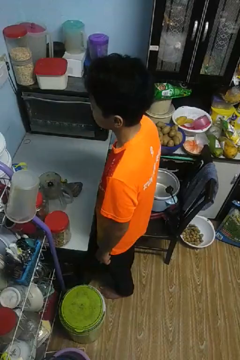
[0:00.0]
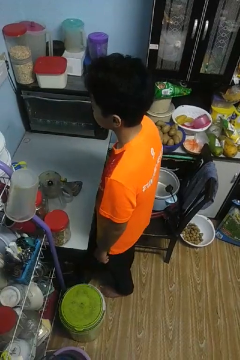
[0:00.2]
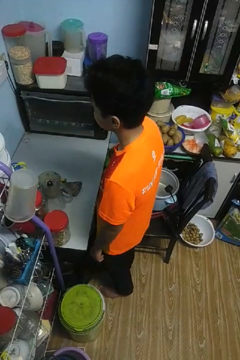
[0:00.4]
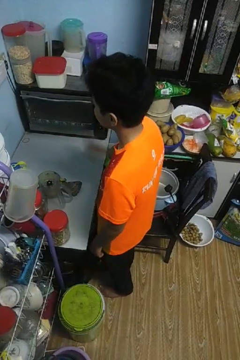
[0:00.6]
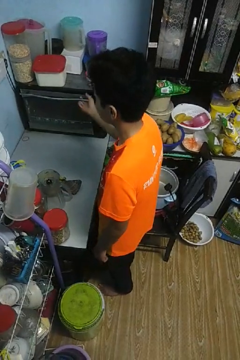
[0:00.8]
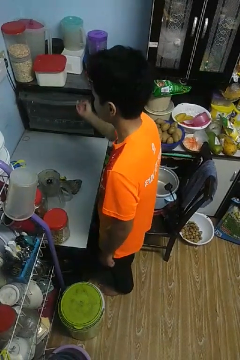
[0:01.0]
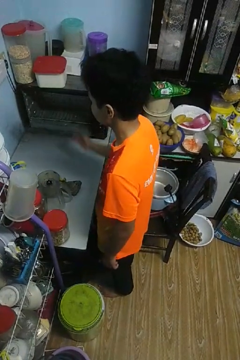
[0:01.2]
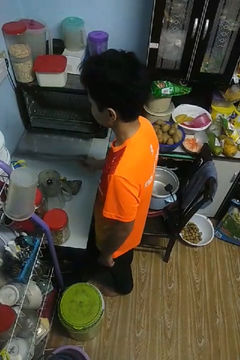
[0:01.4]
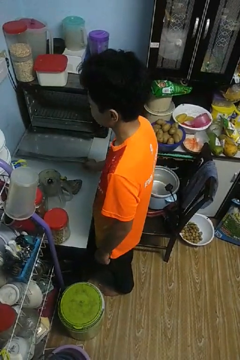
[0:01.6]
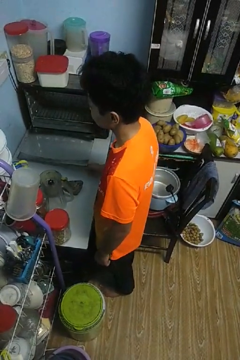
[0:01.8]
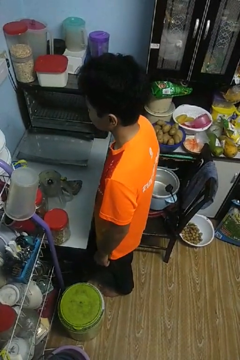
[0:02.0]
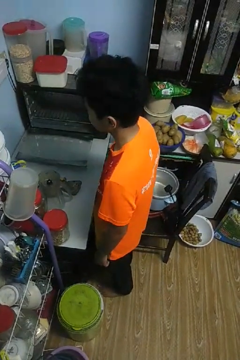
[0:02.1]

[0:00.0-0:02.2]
person opens oven door

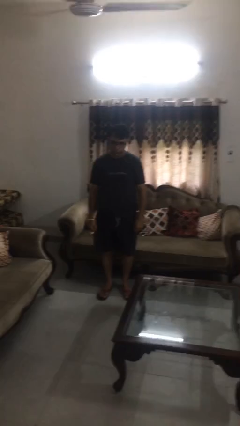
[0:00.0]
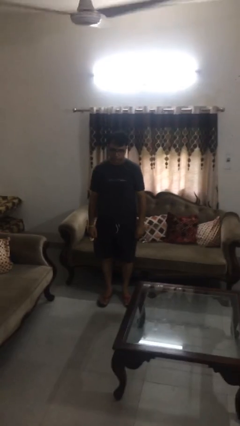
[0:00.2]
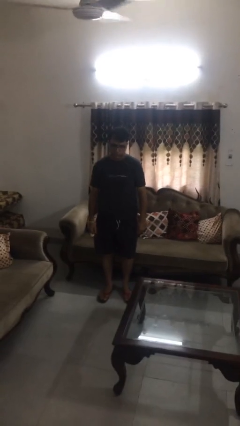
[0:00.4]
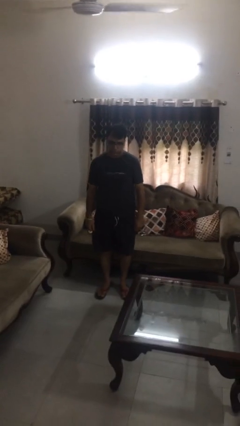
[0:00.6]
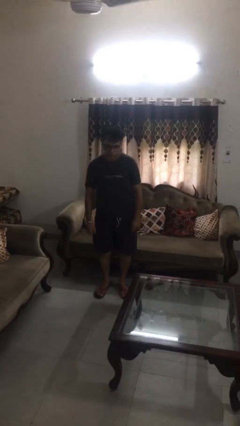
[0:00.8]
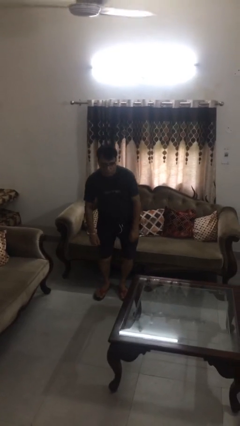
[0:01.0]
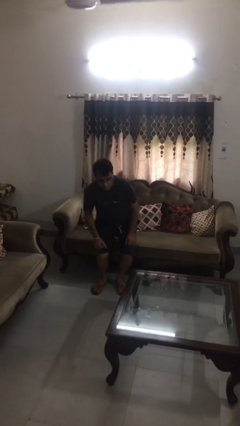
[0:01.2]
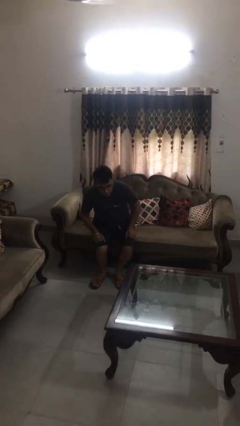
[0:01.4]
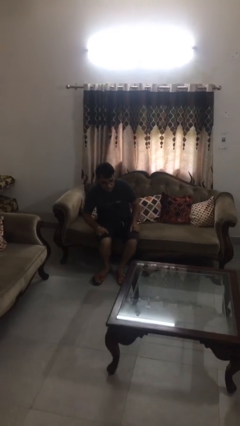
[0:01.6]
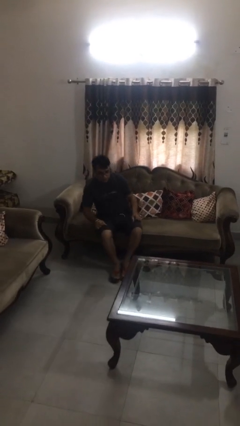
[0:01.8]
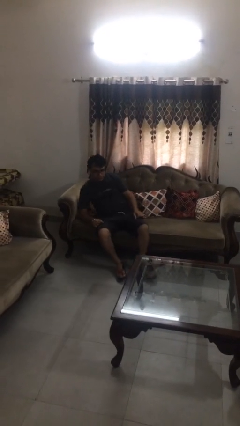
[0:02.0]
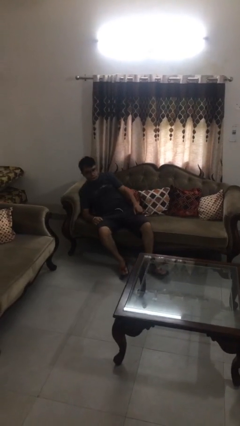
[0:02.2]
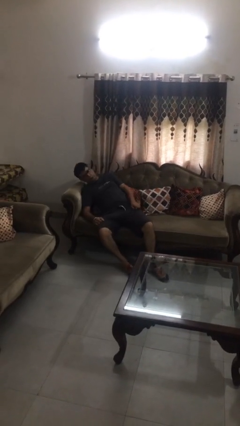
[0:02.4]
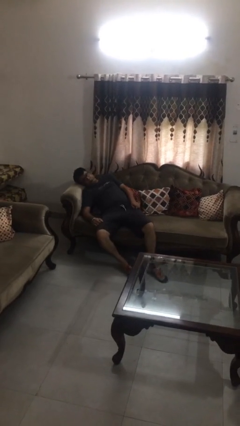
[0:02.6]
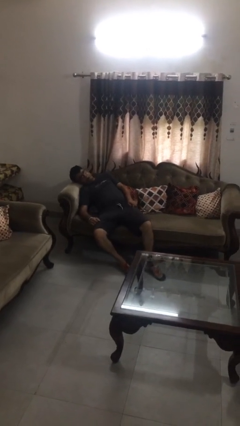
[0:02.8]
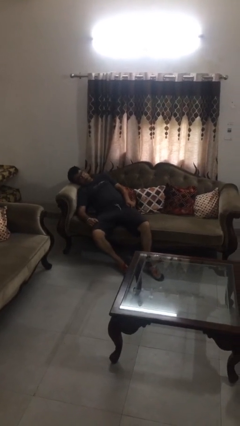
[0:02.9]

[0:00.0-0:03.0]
person lies down on couch

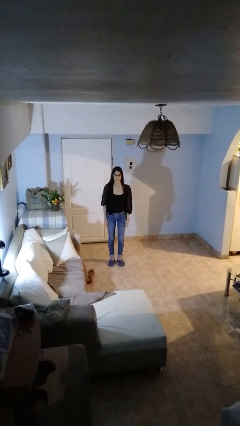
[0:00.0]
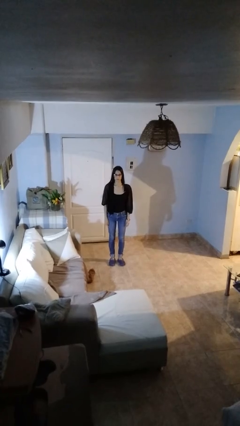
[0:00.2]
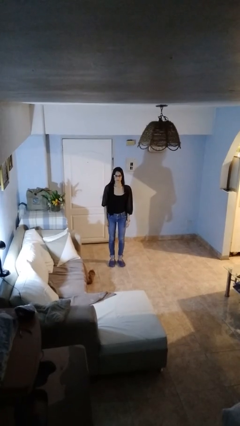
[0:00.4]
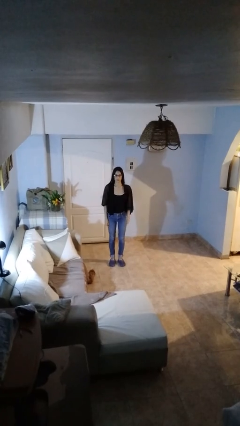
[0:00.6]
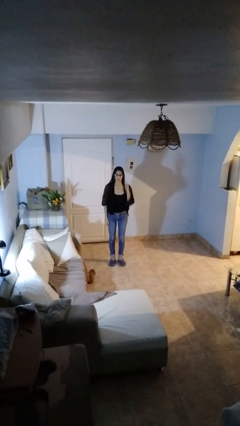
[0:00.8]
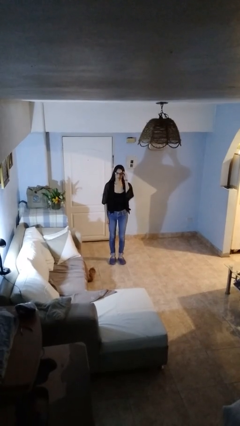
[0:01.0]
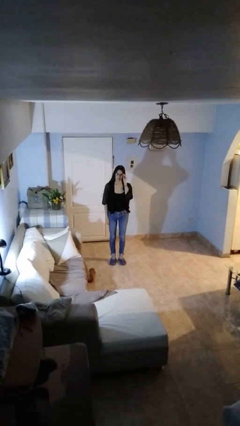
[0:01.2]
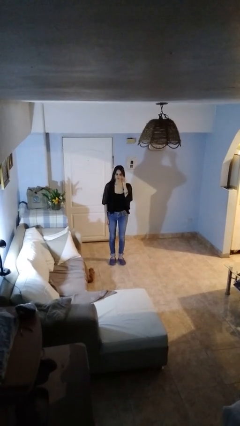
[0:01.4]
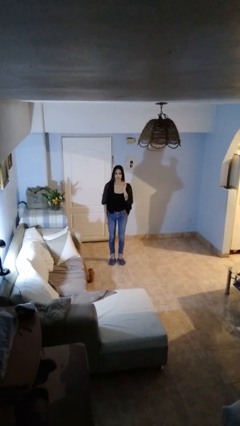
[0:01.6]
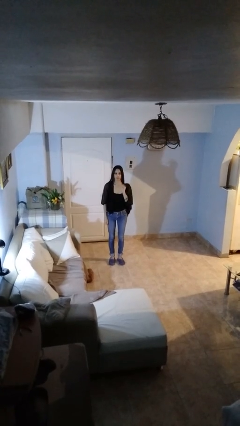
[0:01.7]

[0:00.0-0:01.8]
person takes off glasses

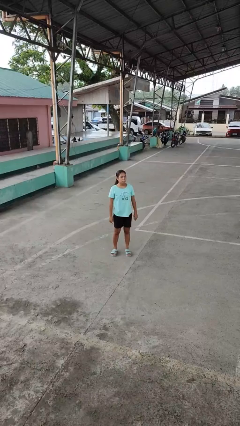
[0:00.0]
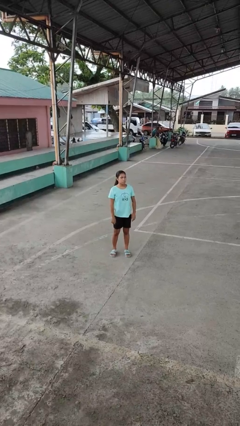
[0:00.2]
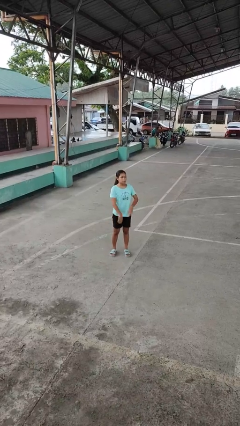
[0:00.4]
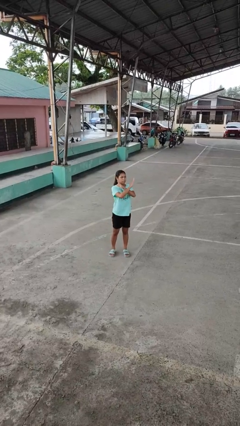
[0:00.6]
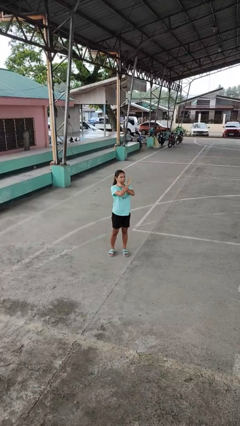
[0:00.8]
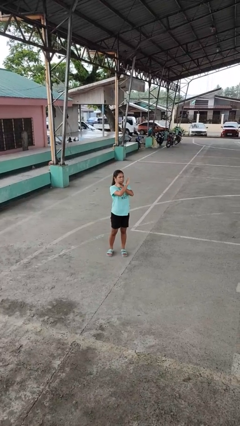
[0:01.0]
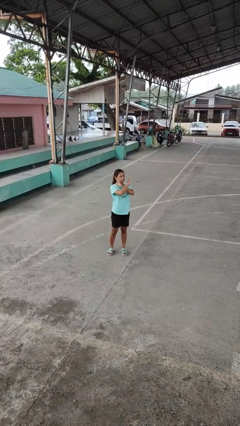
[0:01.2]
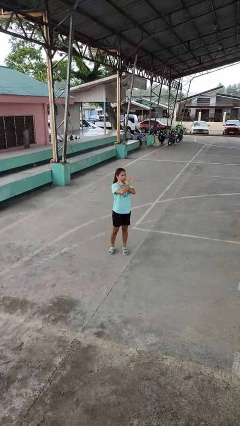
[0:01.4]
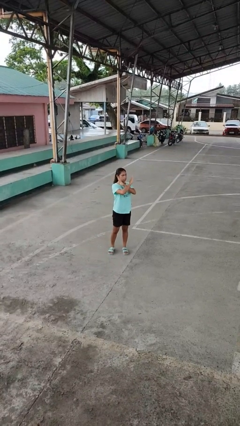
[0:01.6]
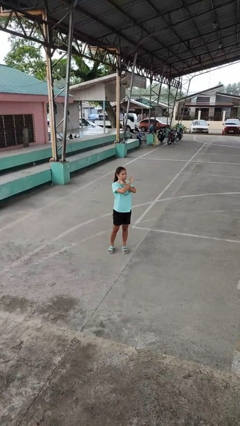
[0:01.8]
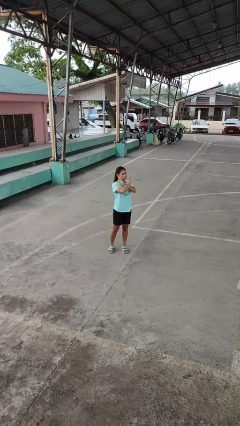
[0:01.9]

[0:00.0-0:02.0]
person gestures arms x

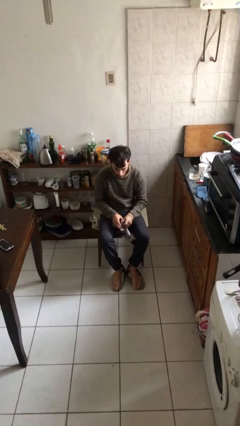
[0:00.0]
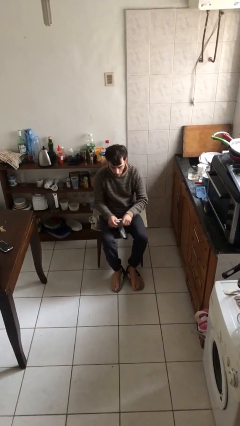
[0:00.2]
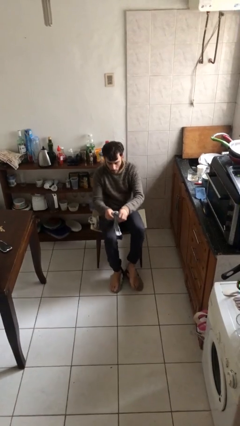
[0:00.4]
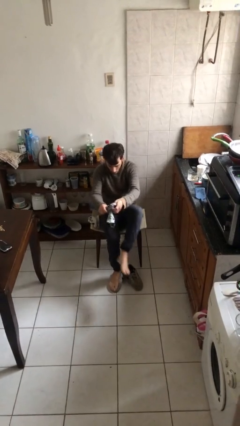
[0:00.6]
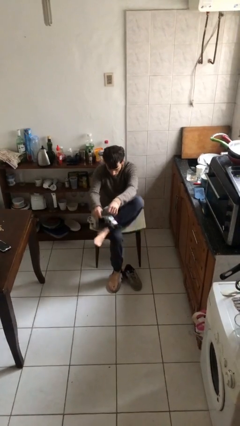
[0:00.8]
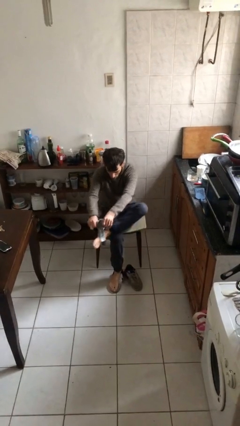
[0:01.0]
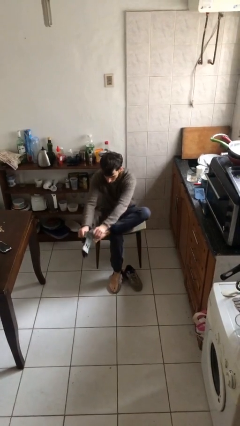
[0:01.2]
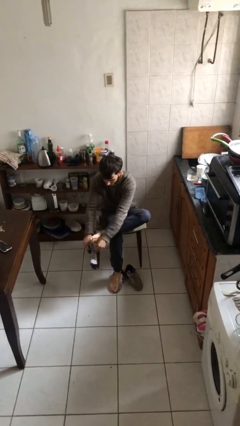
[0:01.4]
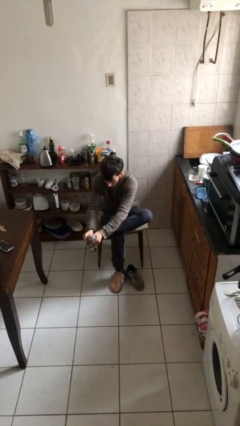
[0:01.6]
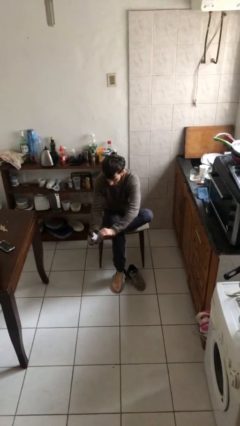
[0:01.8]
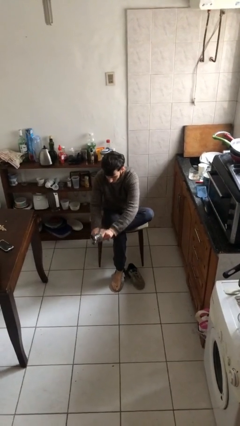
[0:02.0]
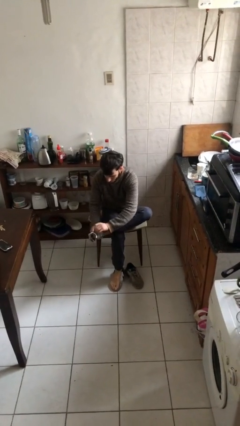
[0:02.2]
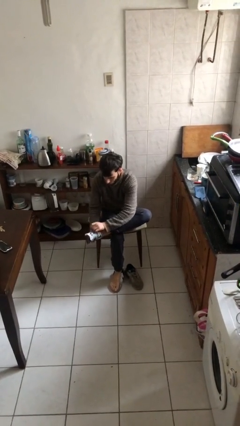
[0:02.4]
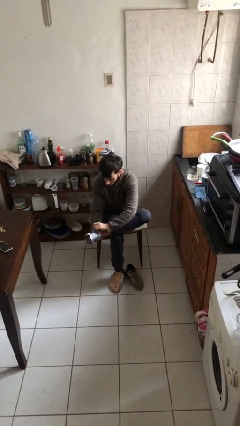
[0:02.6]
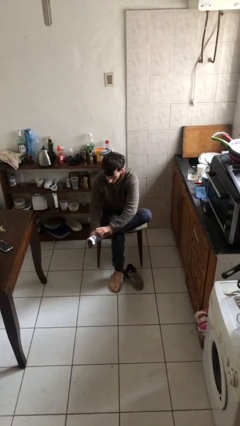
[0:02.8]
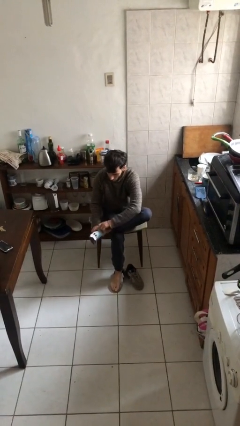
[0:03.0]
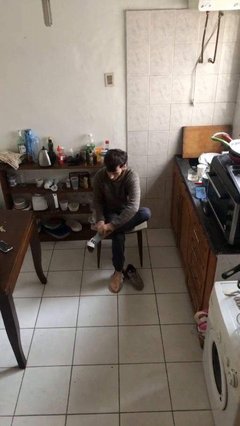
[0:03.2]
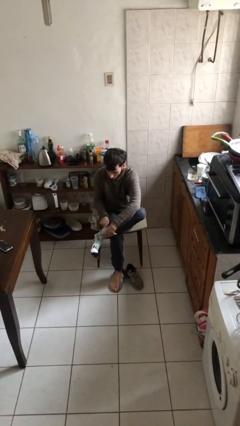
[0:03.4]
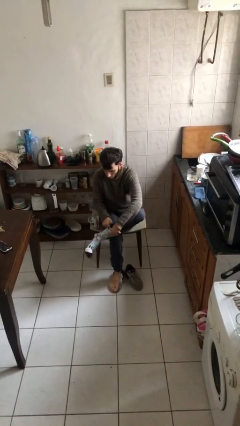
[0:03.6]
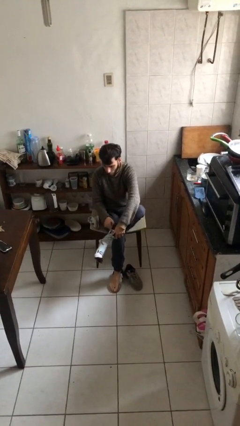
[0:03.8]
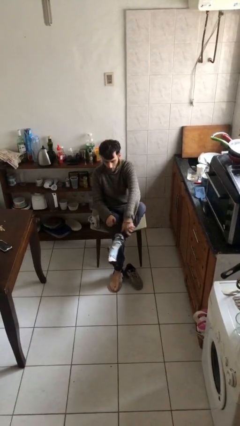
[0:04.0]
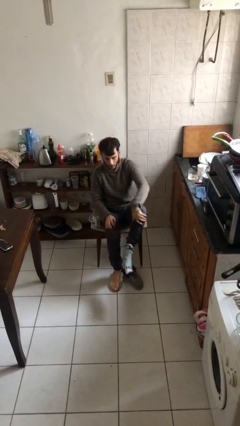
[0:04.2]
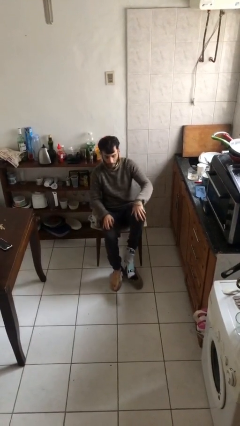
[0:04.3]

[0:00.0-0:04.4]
person puts on socks

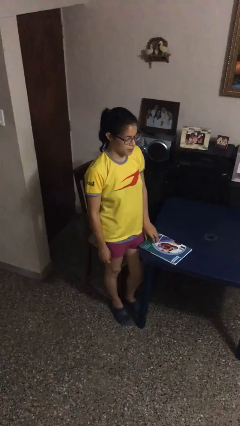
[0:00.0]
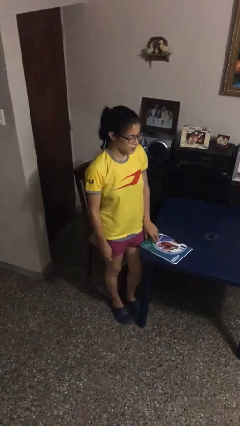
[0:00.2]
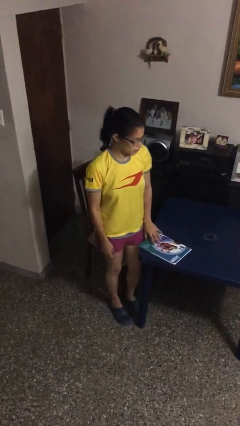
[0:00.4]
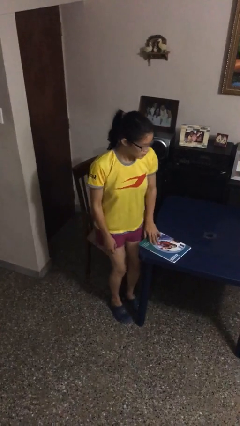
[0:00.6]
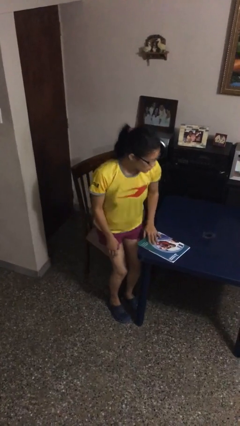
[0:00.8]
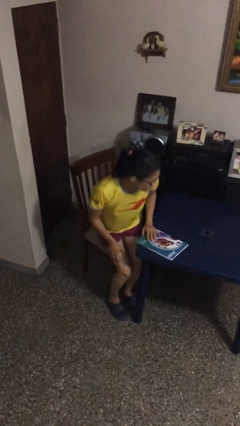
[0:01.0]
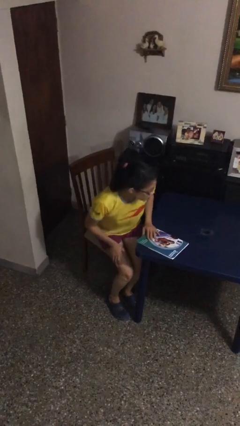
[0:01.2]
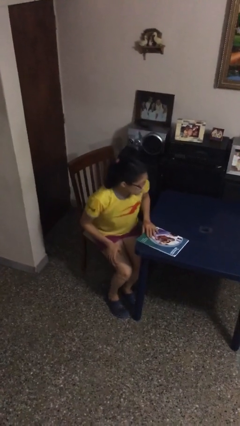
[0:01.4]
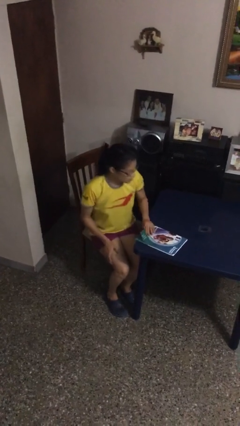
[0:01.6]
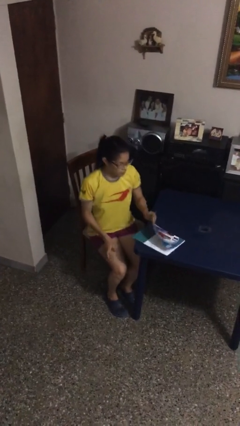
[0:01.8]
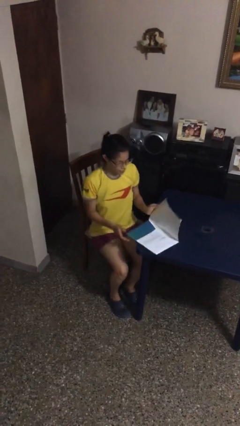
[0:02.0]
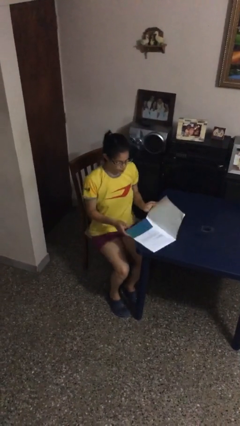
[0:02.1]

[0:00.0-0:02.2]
person sits down

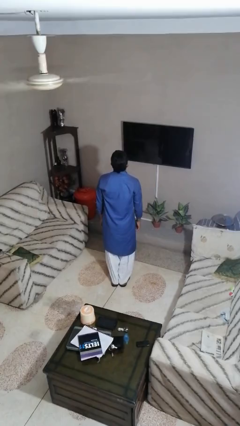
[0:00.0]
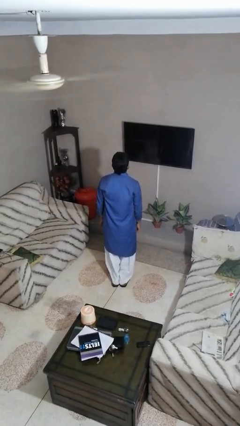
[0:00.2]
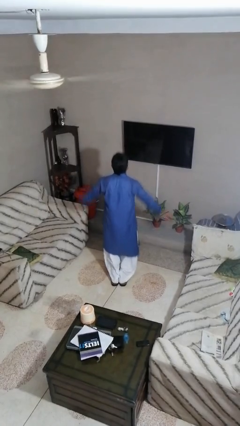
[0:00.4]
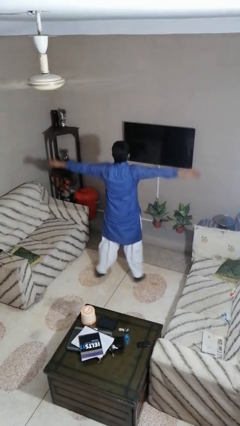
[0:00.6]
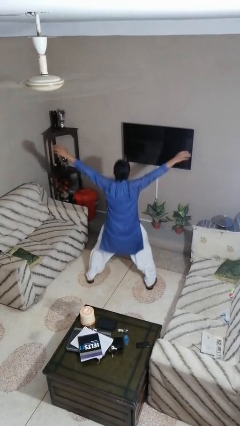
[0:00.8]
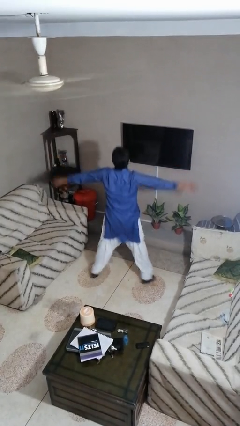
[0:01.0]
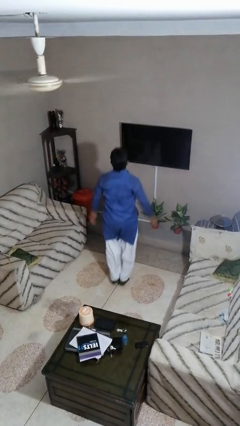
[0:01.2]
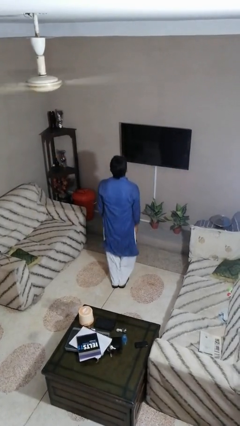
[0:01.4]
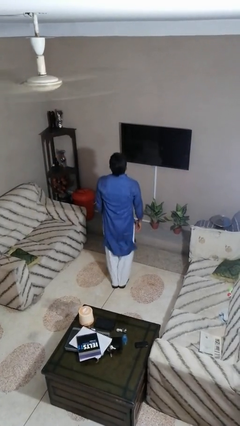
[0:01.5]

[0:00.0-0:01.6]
person exercises with jumping jacks

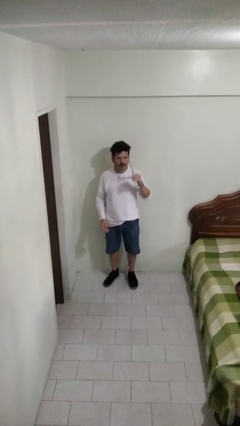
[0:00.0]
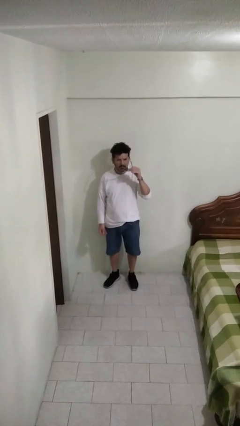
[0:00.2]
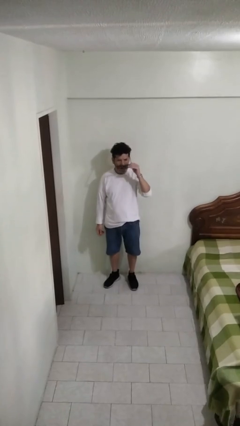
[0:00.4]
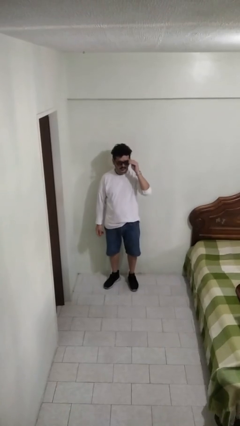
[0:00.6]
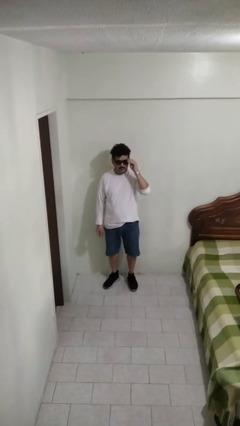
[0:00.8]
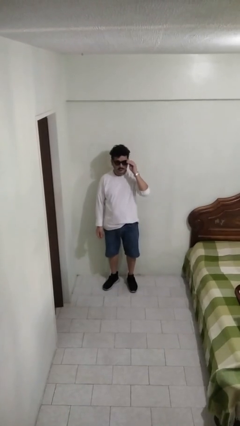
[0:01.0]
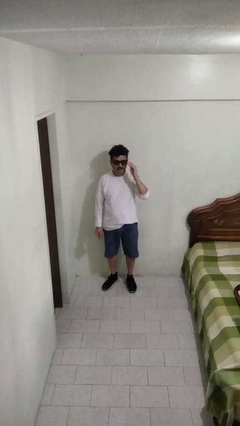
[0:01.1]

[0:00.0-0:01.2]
person puts on sunglasses
